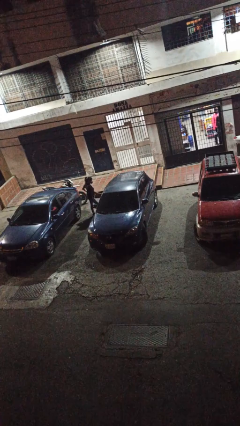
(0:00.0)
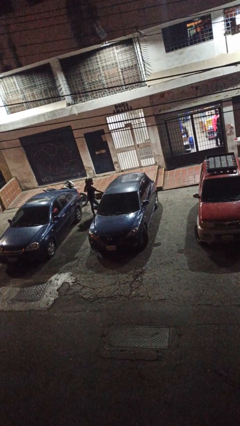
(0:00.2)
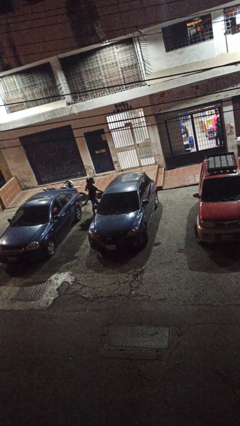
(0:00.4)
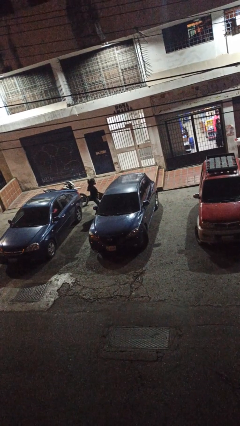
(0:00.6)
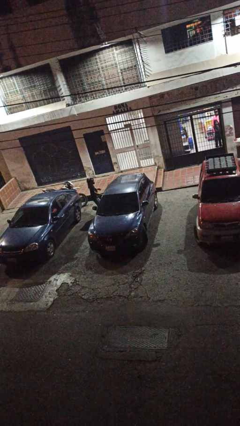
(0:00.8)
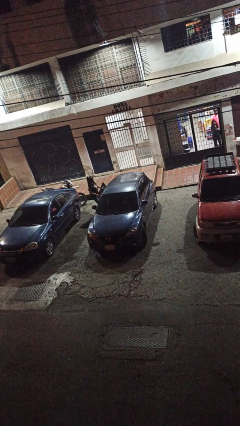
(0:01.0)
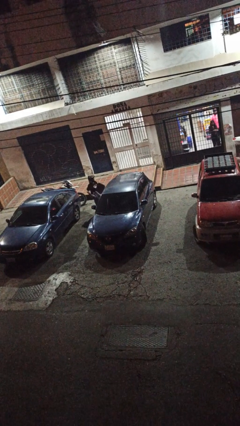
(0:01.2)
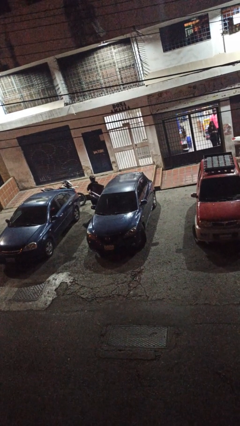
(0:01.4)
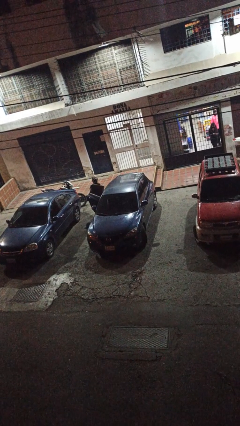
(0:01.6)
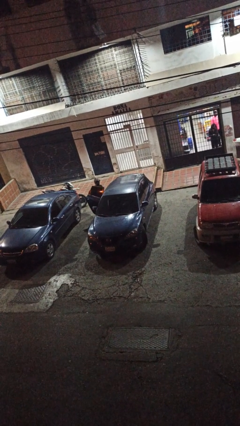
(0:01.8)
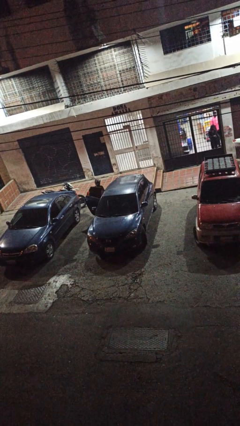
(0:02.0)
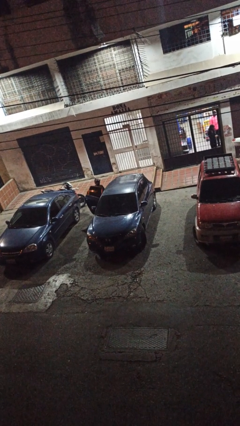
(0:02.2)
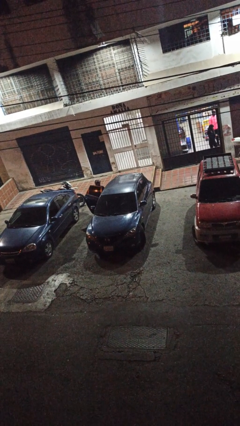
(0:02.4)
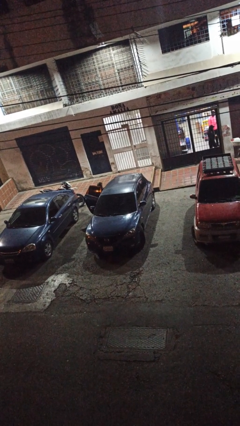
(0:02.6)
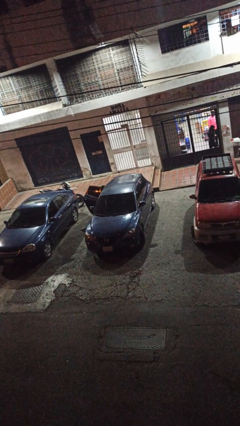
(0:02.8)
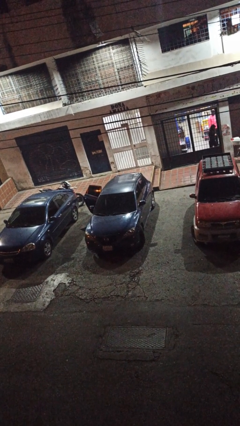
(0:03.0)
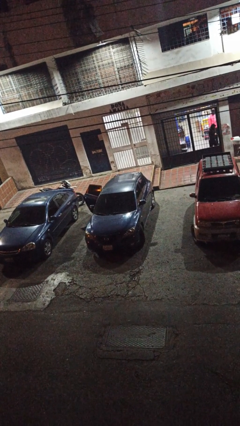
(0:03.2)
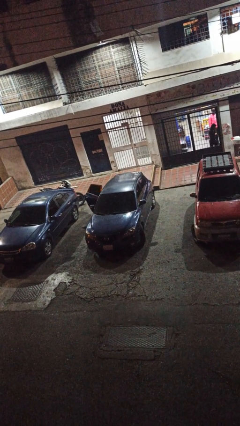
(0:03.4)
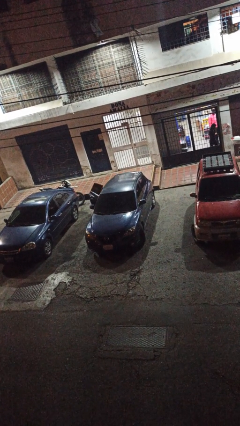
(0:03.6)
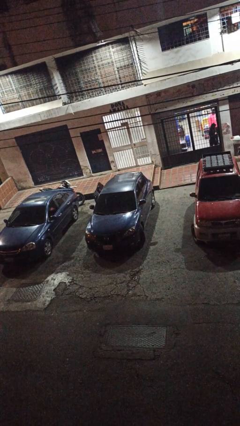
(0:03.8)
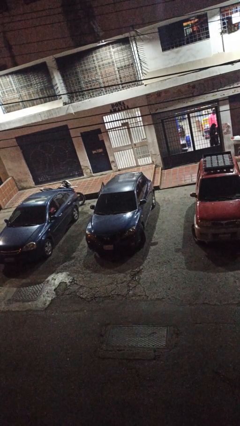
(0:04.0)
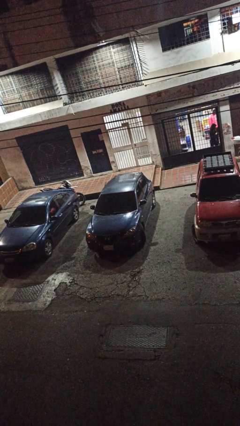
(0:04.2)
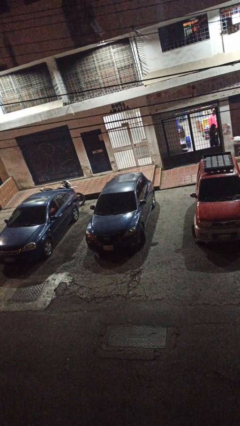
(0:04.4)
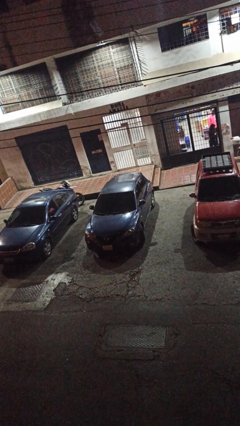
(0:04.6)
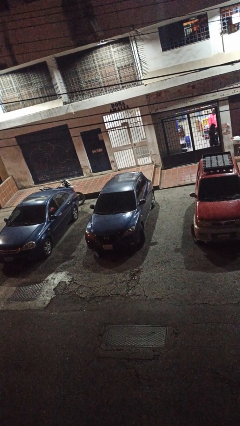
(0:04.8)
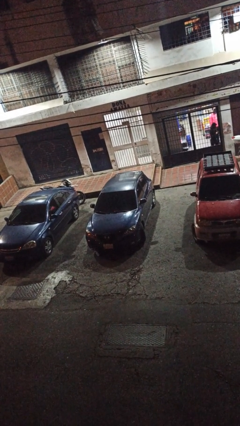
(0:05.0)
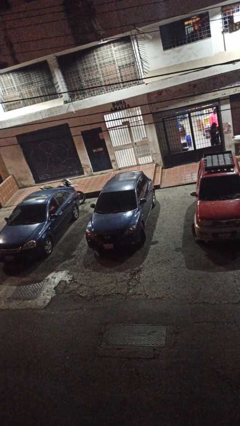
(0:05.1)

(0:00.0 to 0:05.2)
car picks up person

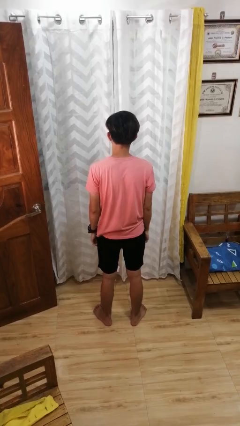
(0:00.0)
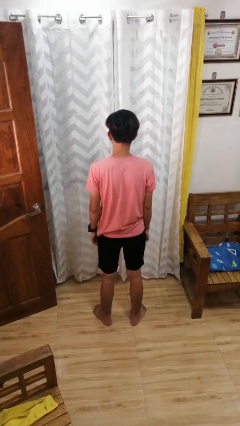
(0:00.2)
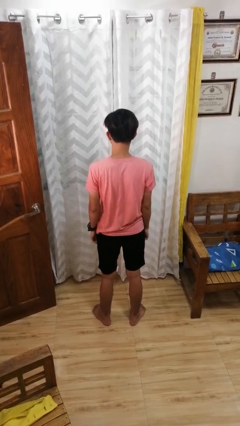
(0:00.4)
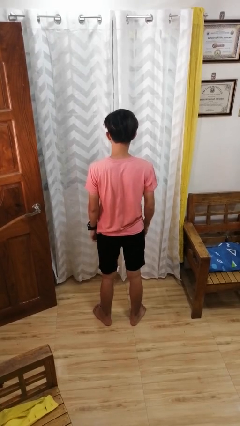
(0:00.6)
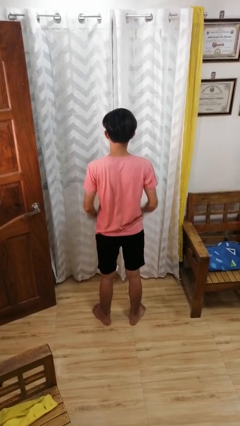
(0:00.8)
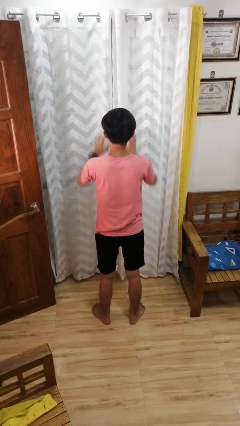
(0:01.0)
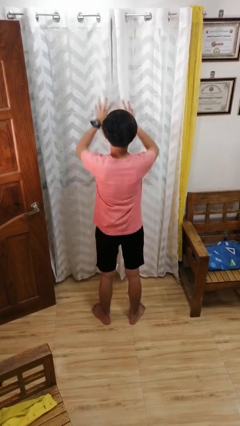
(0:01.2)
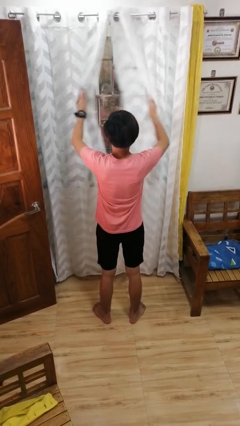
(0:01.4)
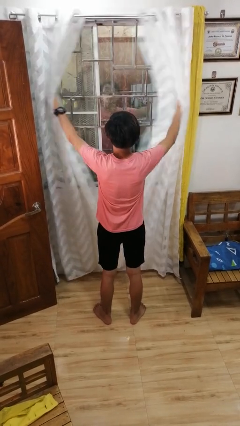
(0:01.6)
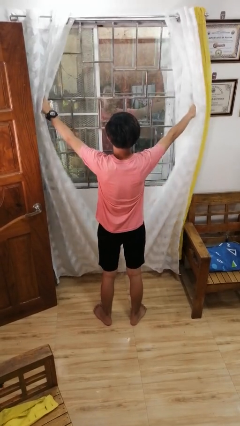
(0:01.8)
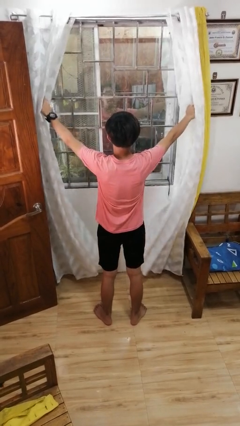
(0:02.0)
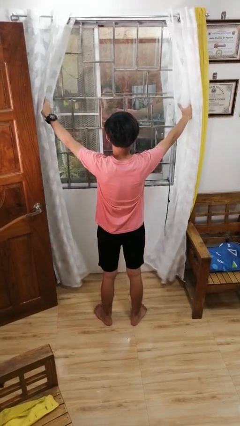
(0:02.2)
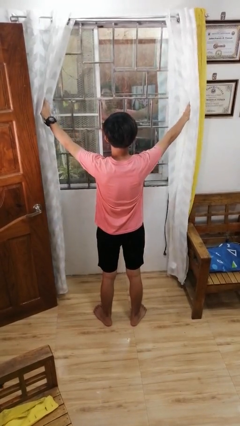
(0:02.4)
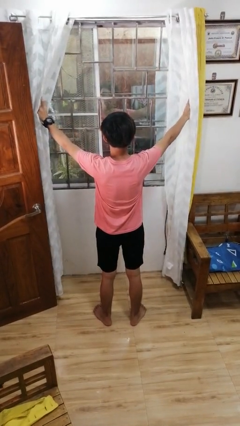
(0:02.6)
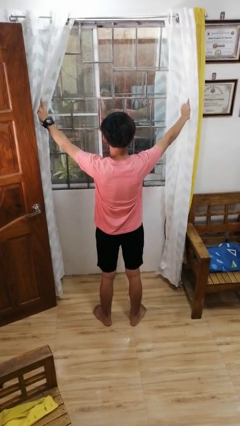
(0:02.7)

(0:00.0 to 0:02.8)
person opens curtains

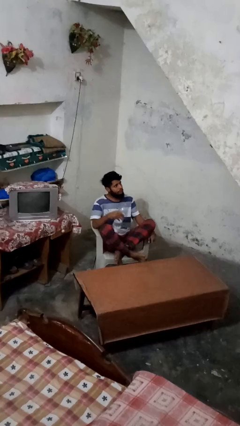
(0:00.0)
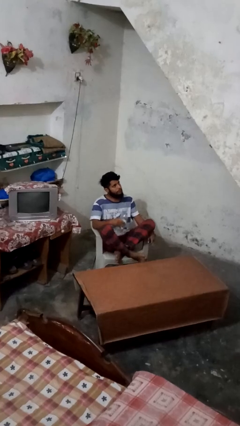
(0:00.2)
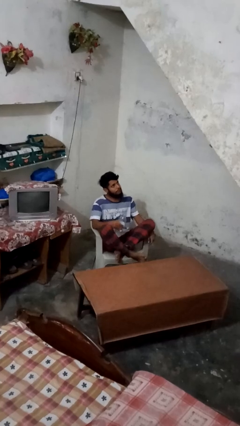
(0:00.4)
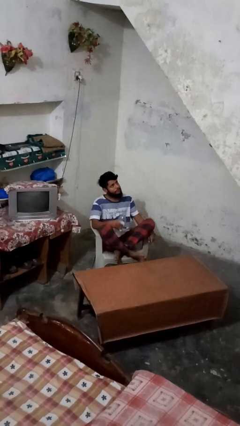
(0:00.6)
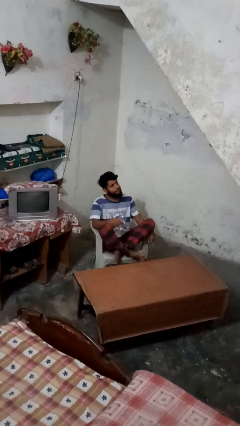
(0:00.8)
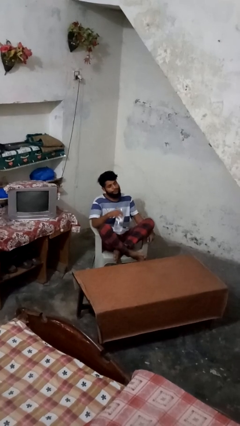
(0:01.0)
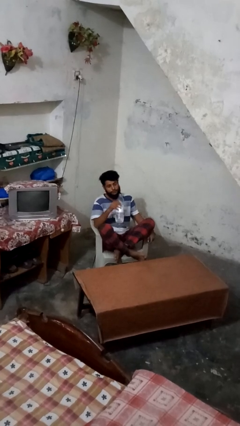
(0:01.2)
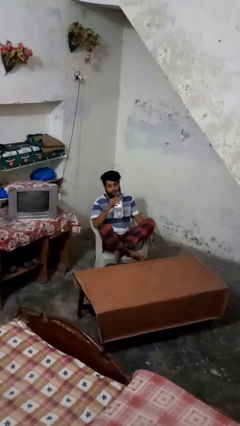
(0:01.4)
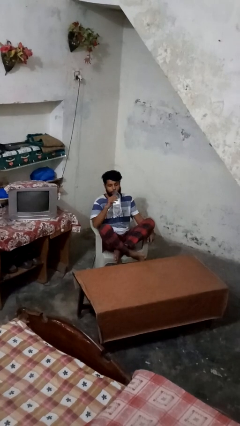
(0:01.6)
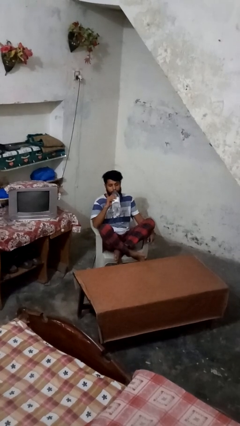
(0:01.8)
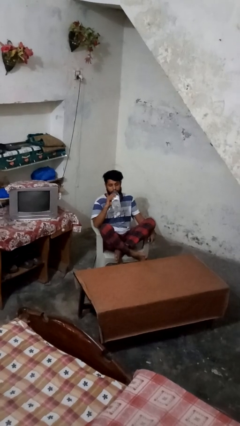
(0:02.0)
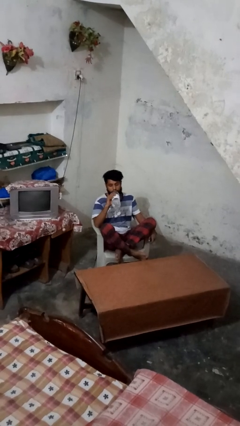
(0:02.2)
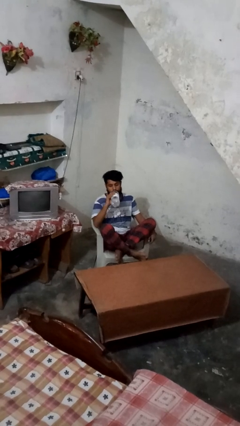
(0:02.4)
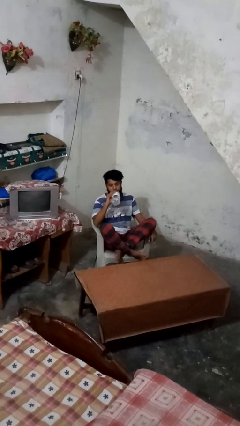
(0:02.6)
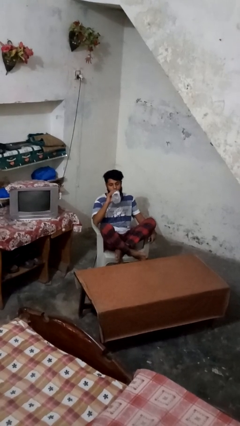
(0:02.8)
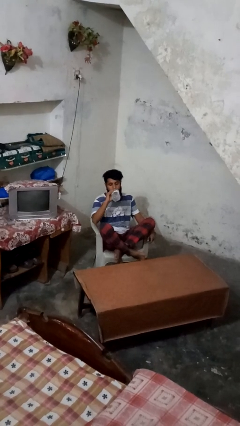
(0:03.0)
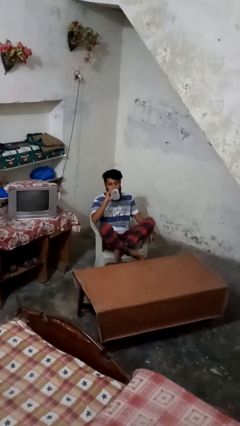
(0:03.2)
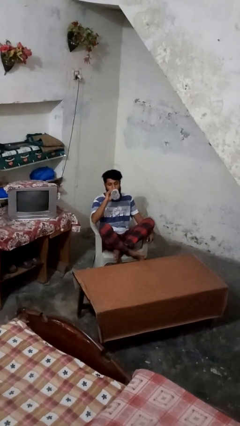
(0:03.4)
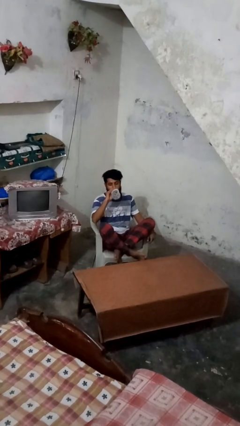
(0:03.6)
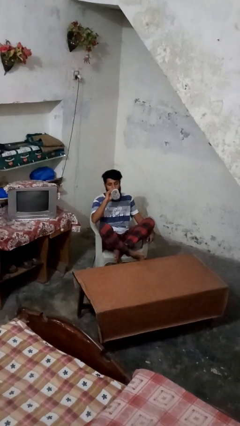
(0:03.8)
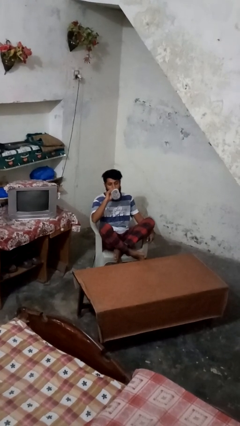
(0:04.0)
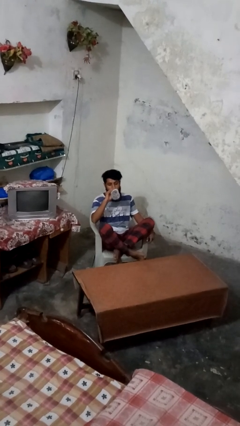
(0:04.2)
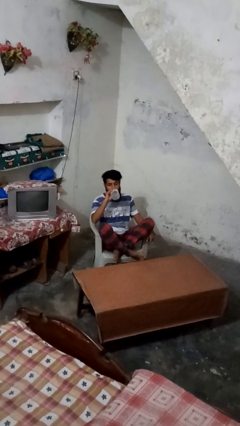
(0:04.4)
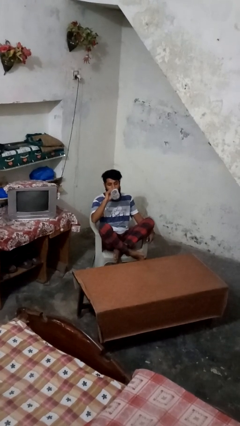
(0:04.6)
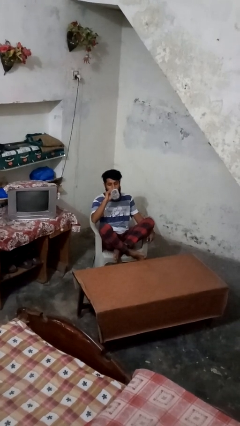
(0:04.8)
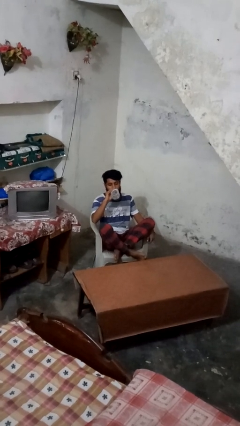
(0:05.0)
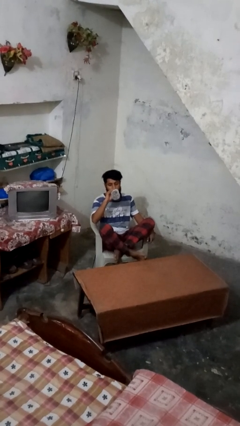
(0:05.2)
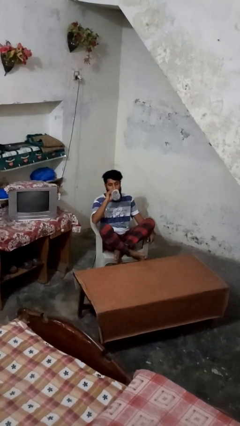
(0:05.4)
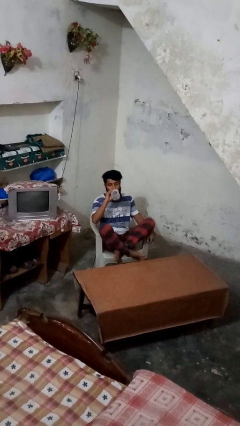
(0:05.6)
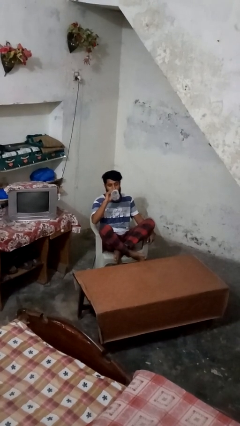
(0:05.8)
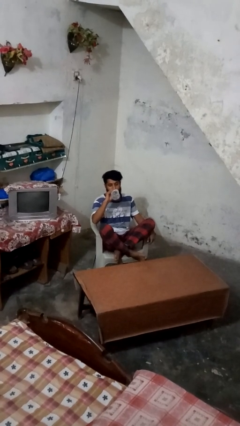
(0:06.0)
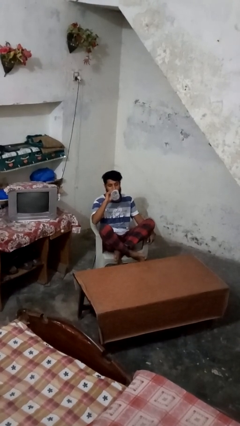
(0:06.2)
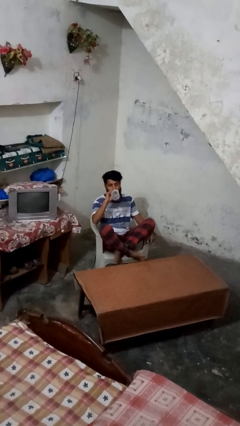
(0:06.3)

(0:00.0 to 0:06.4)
person drinks from bottle

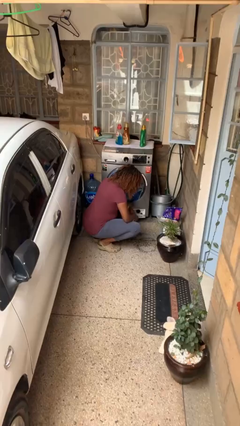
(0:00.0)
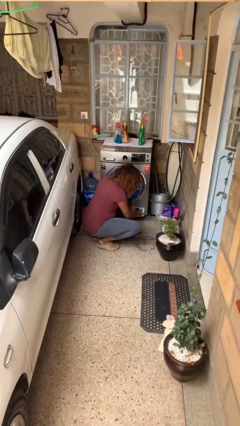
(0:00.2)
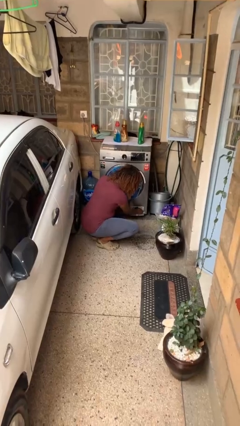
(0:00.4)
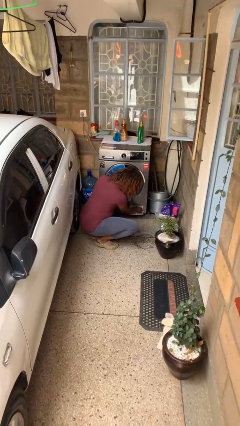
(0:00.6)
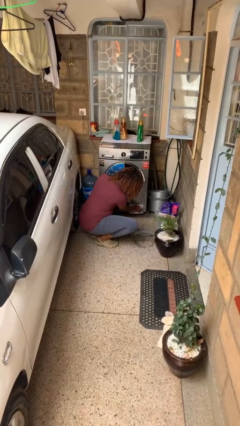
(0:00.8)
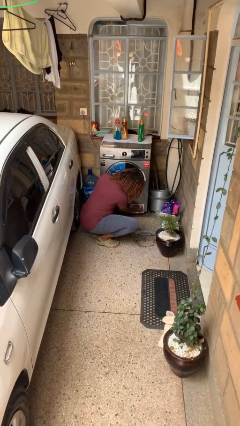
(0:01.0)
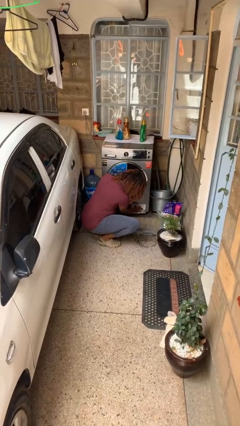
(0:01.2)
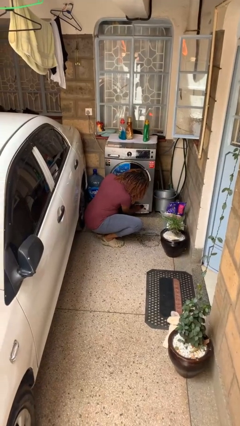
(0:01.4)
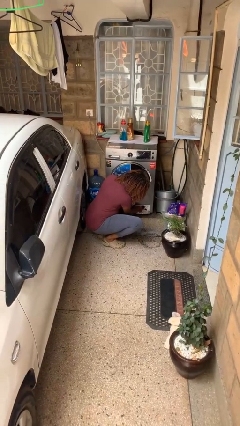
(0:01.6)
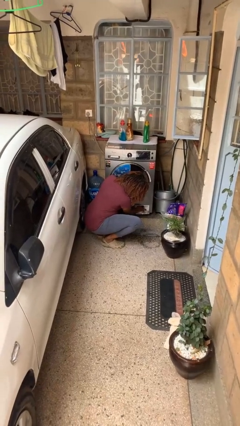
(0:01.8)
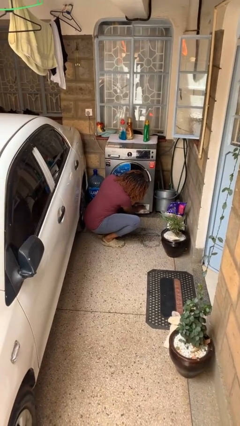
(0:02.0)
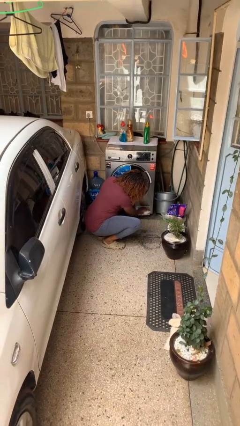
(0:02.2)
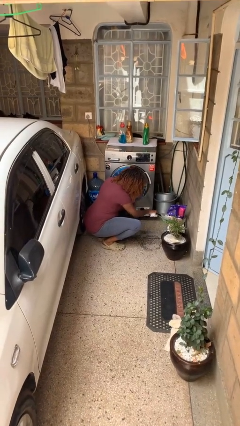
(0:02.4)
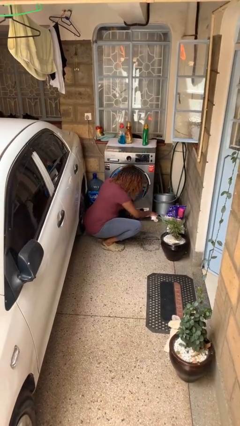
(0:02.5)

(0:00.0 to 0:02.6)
person cleans dryer lint trap

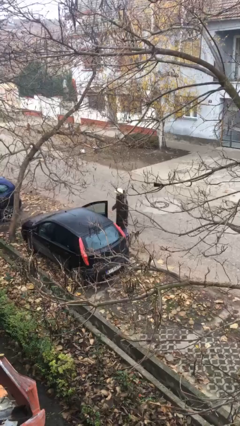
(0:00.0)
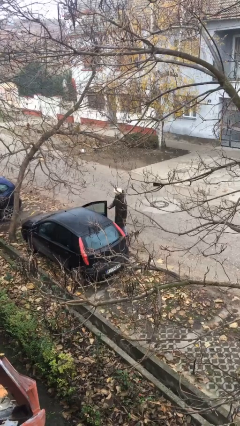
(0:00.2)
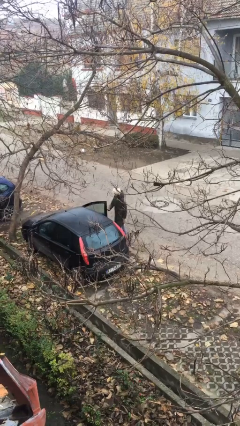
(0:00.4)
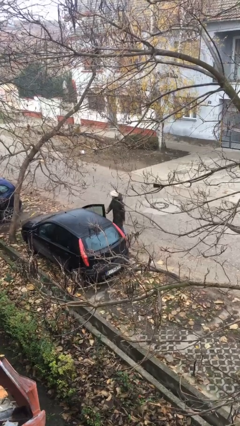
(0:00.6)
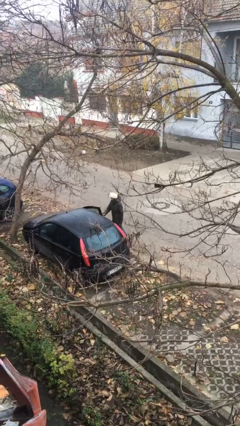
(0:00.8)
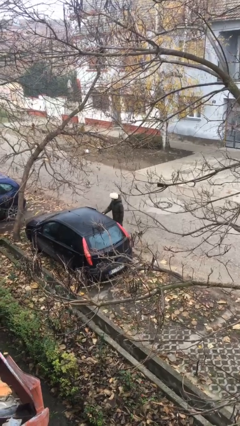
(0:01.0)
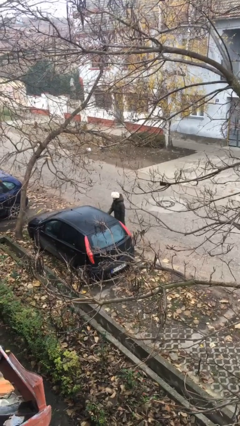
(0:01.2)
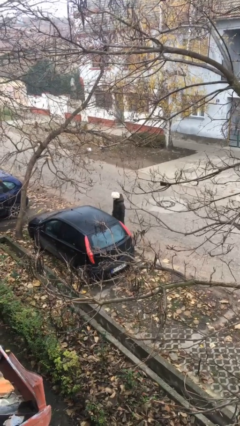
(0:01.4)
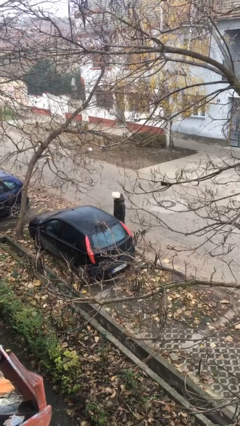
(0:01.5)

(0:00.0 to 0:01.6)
person closes car door
